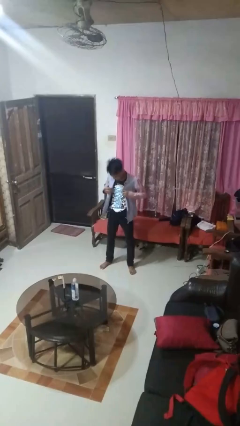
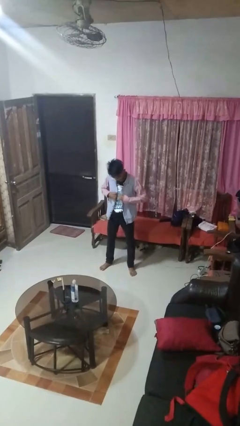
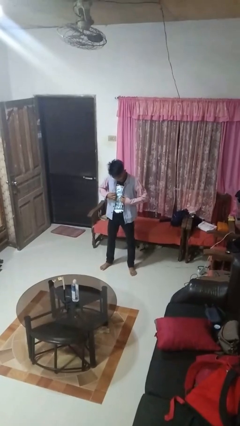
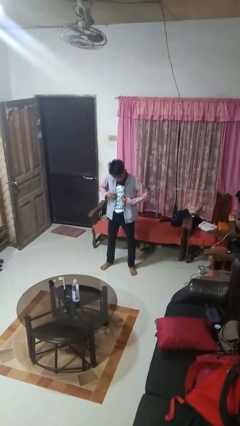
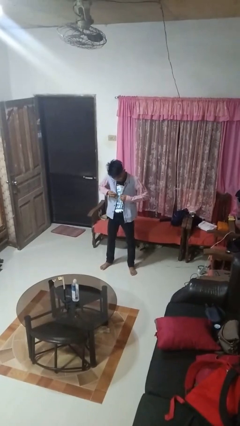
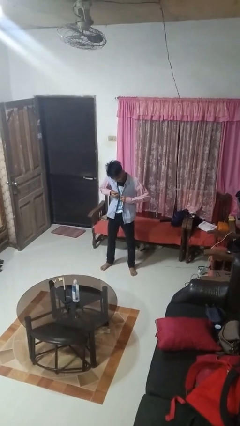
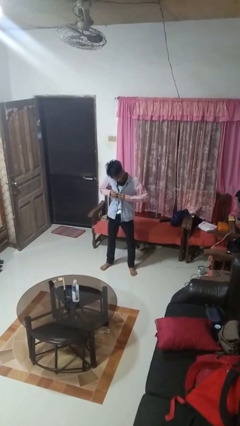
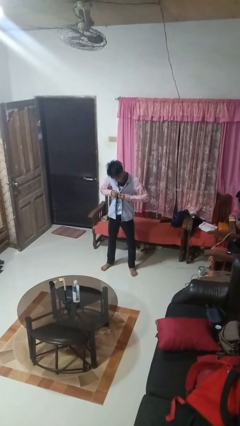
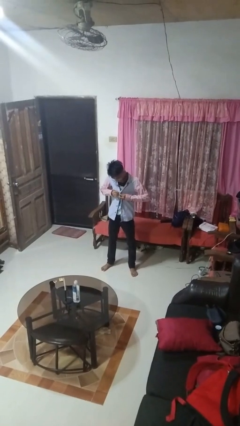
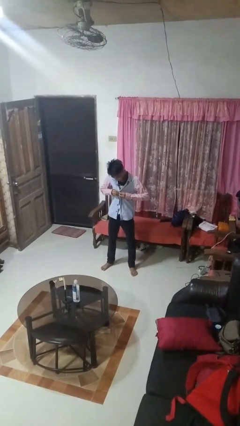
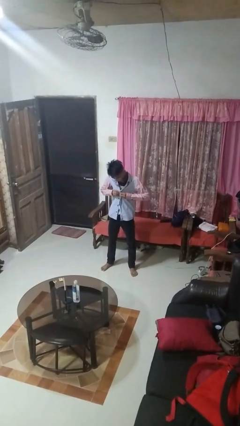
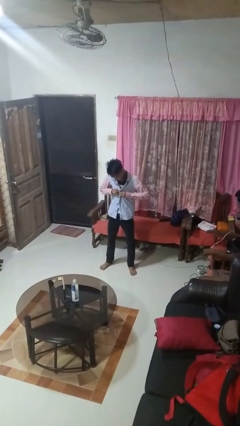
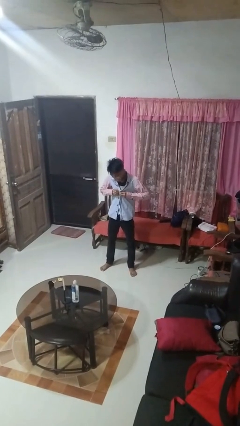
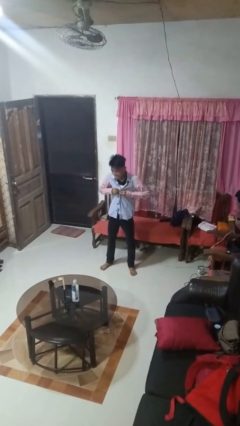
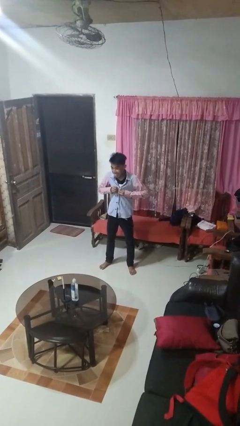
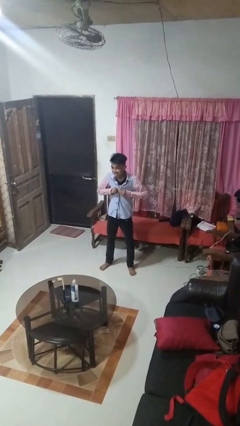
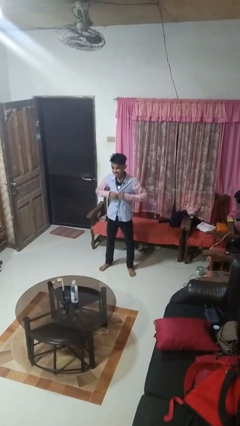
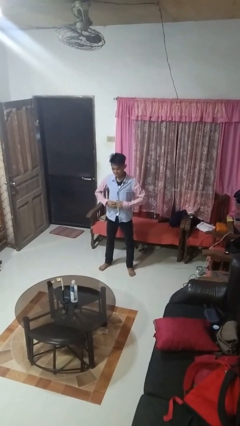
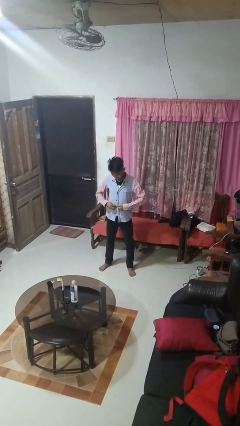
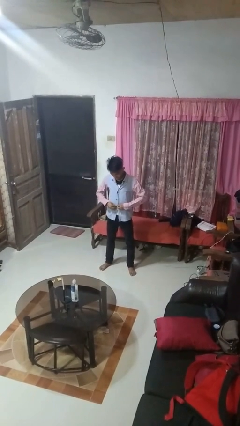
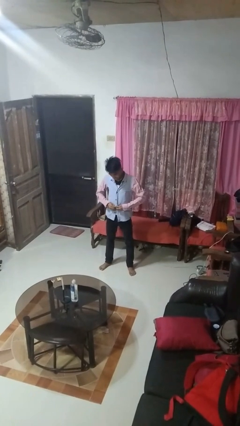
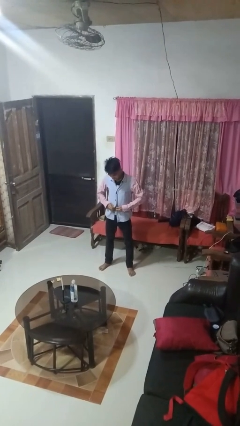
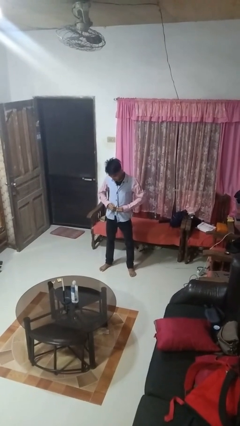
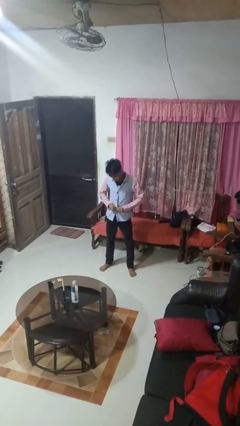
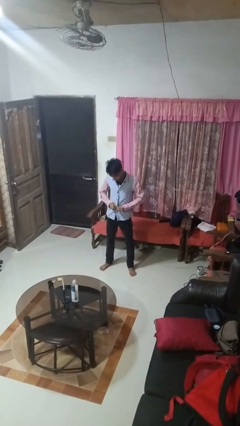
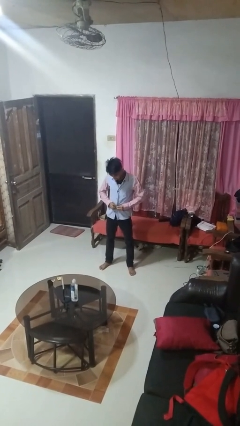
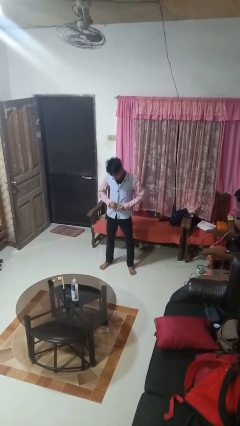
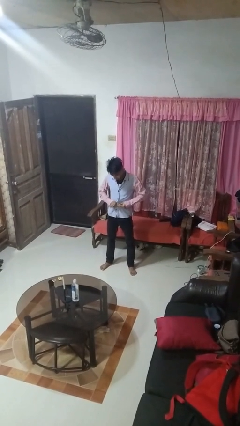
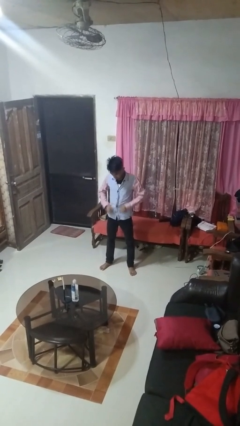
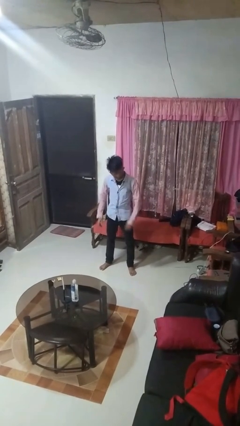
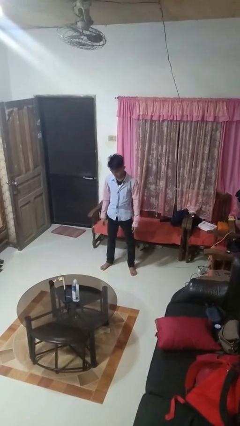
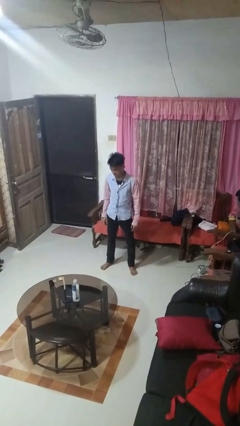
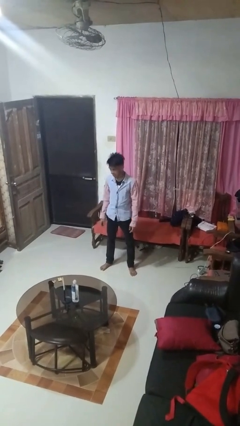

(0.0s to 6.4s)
person buttons shirt

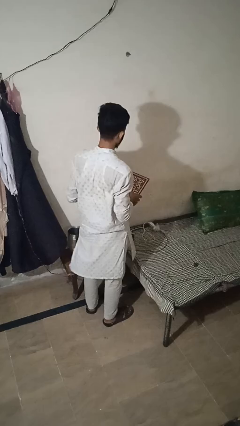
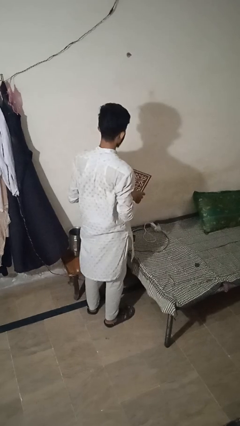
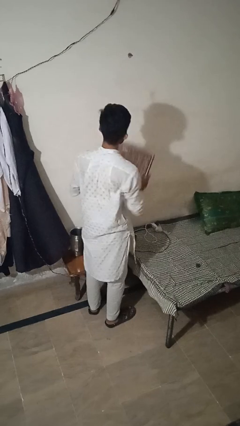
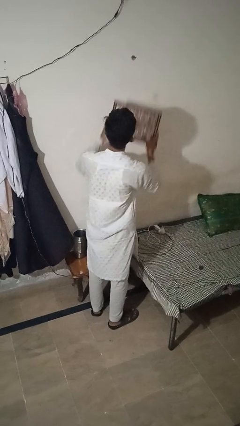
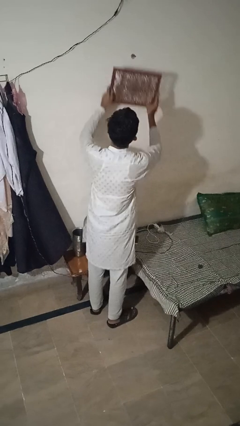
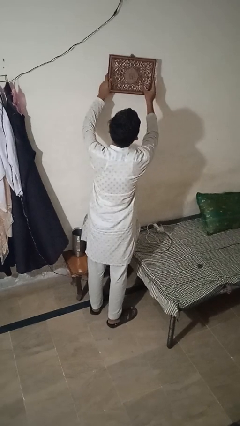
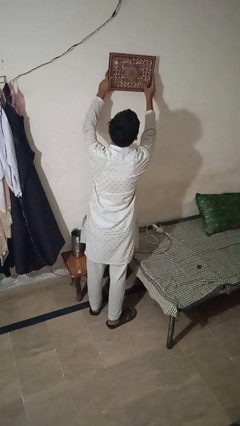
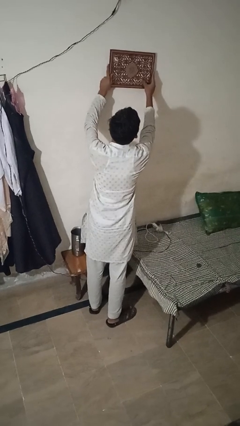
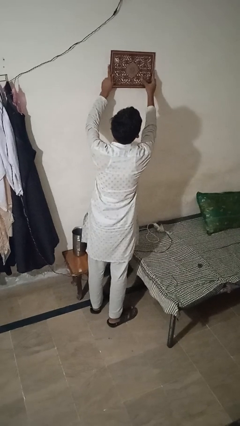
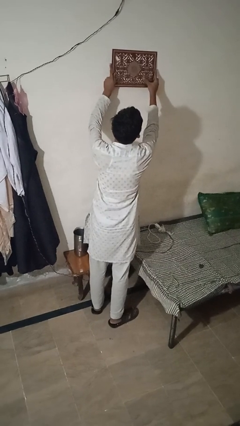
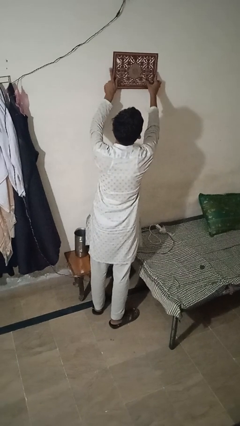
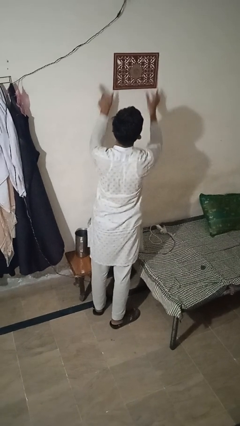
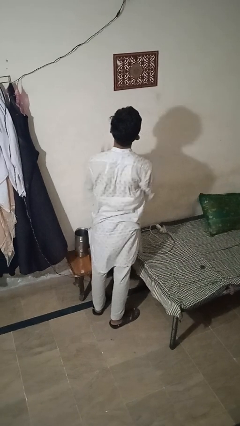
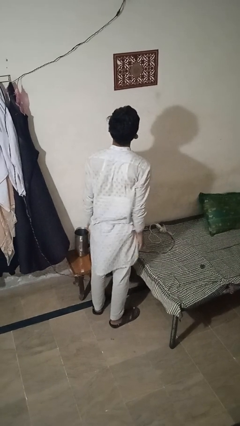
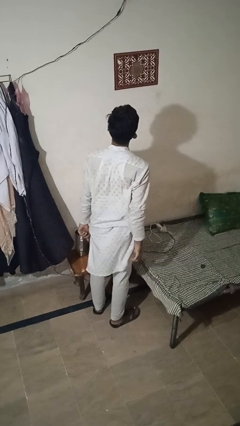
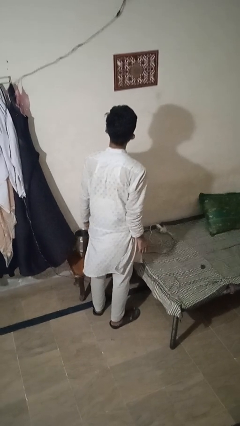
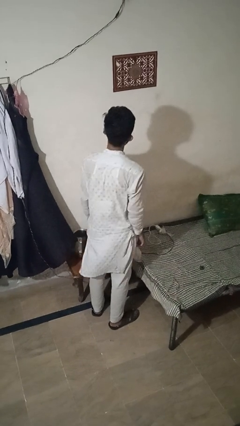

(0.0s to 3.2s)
person puts up picture frame

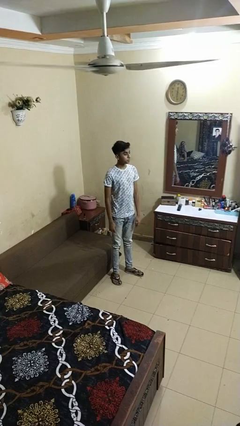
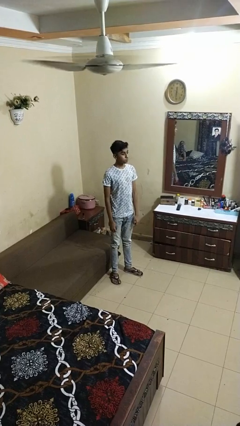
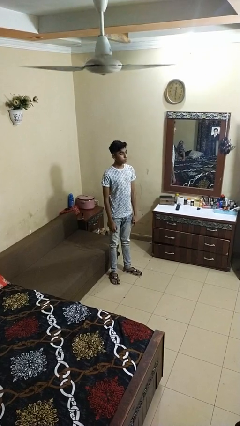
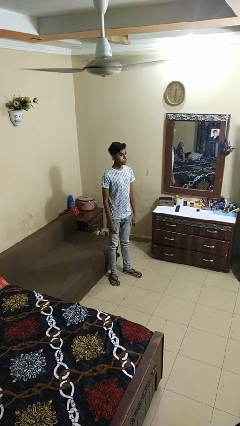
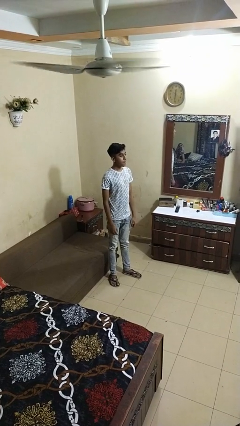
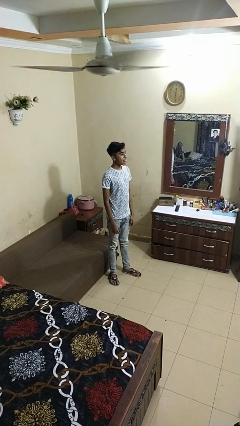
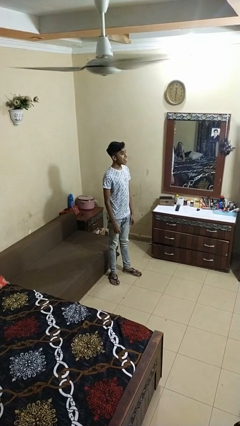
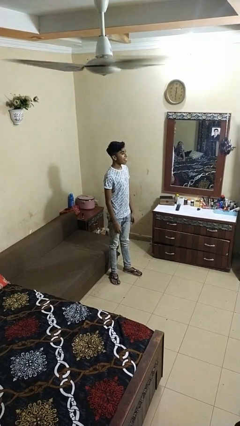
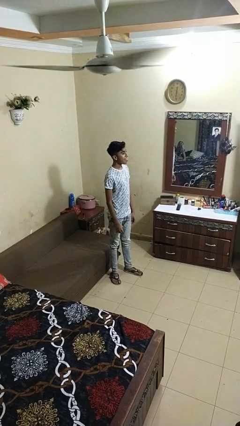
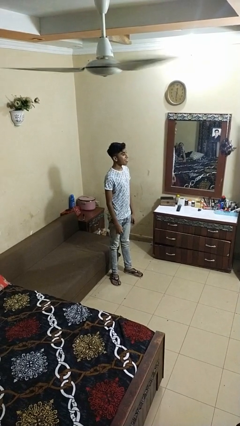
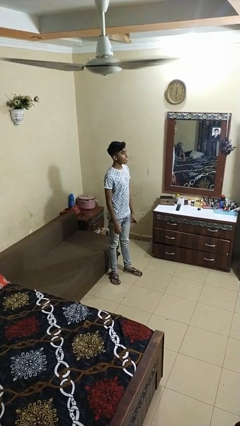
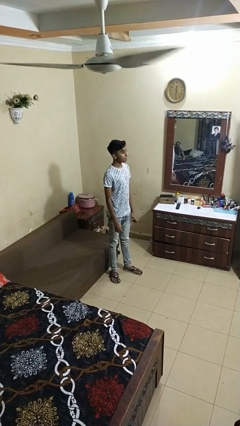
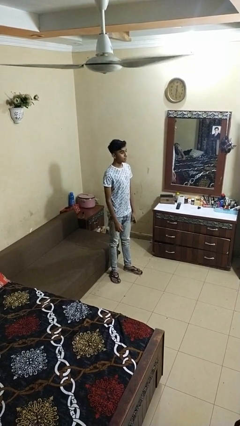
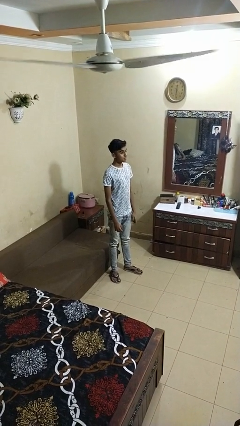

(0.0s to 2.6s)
person sticks out tongue

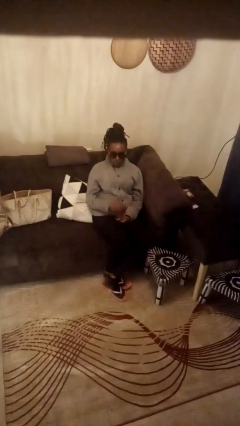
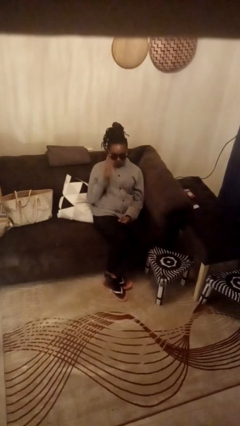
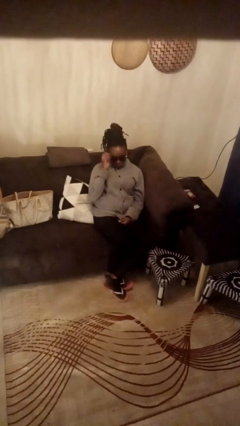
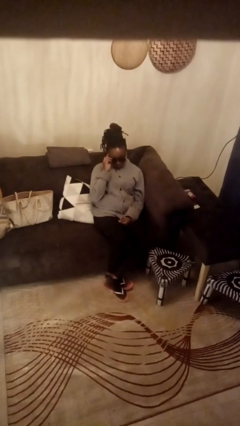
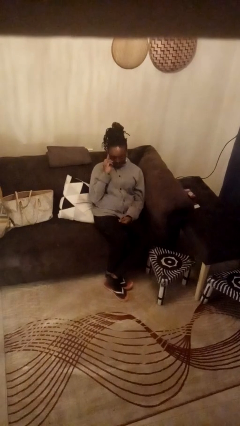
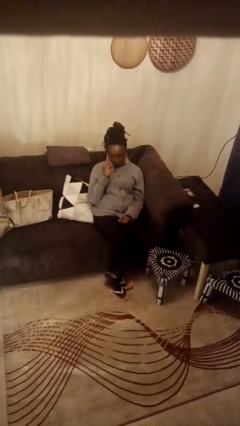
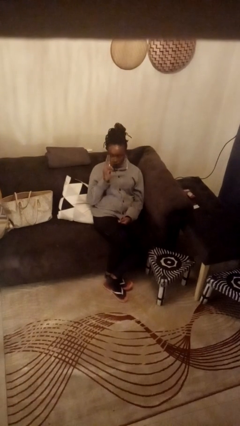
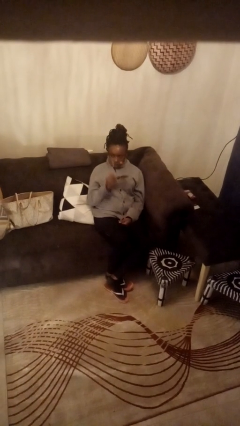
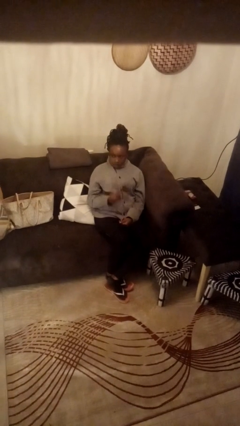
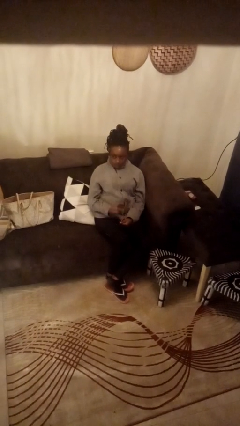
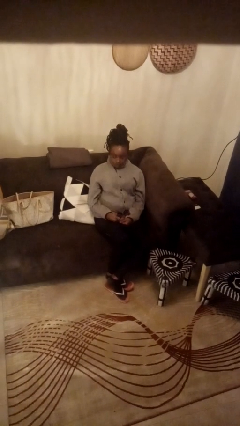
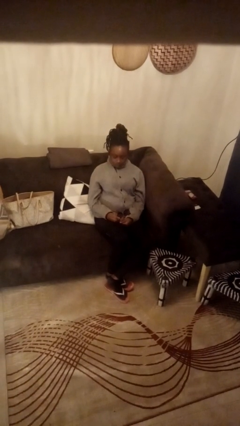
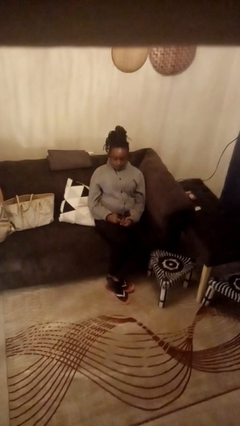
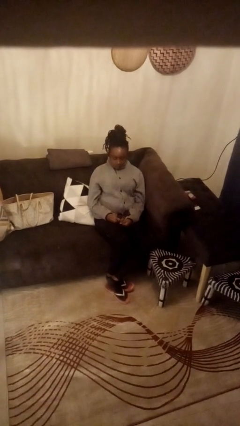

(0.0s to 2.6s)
person takes off sunglasses

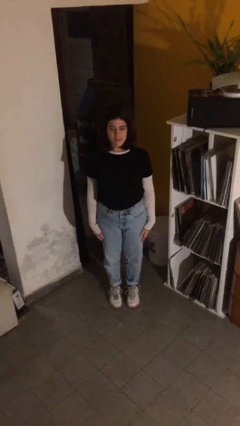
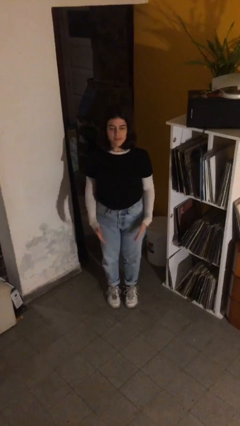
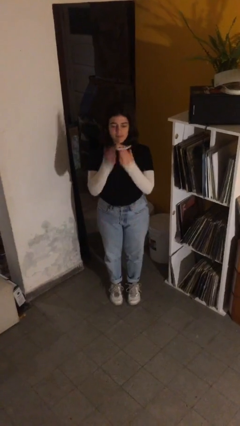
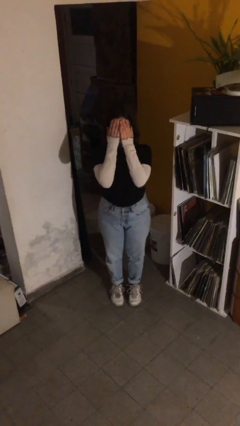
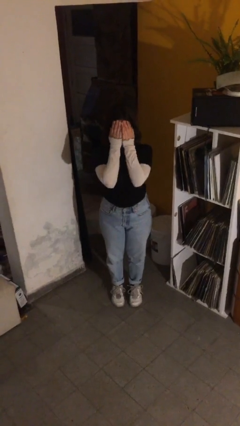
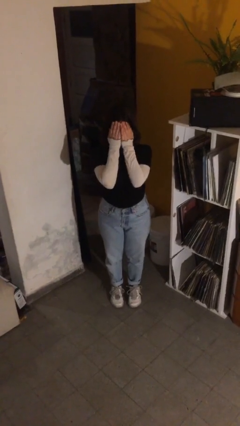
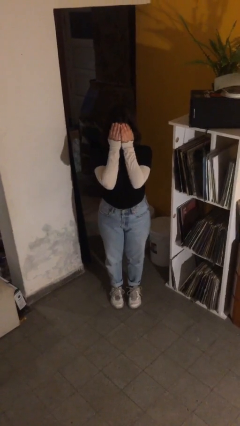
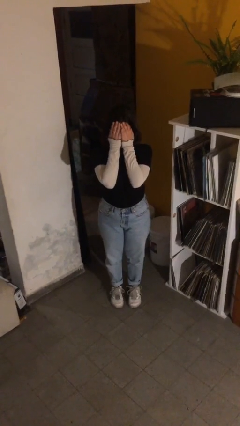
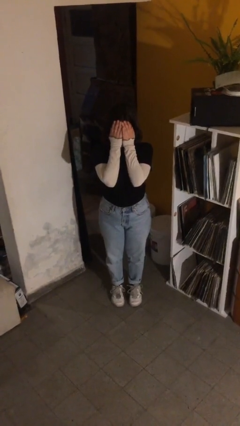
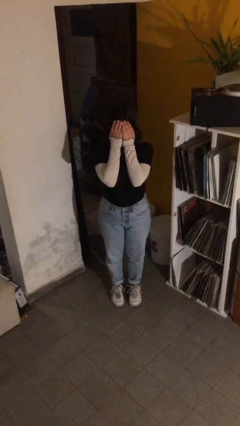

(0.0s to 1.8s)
person covers face with hands

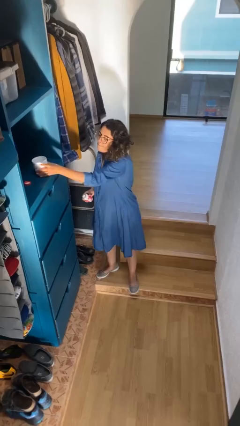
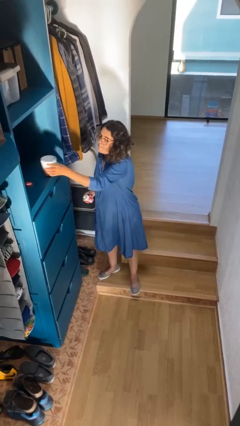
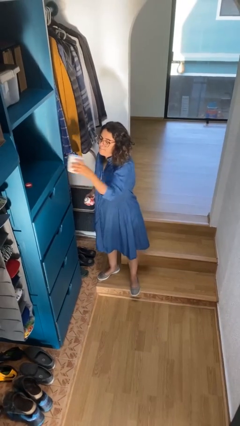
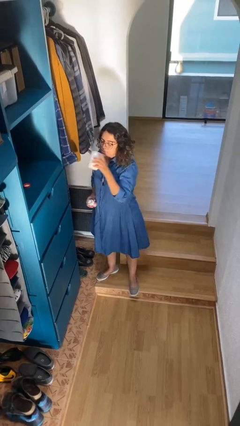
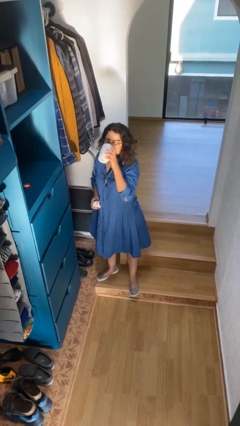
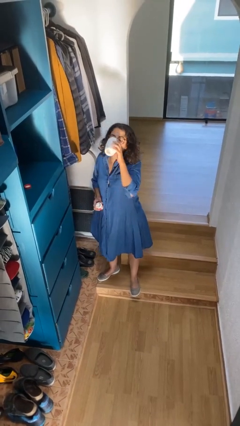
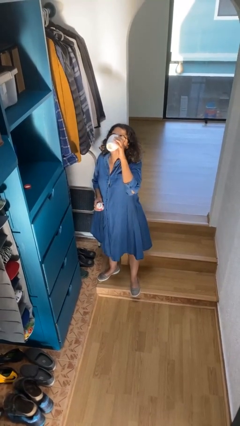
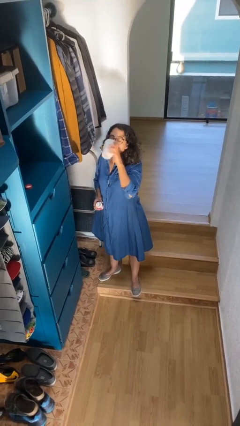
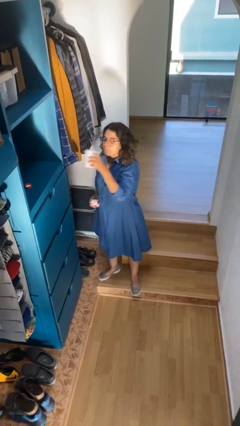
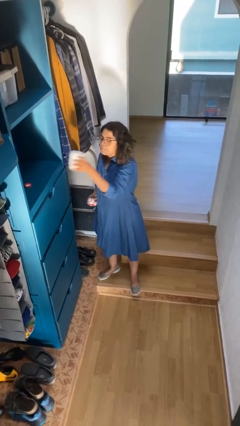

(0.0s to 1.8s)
person drinks from cup
